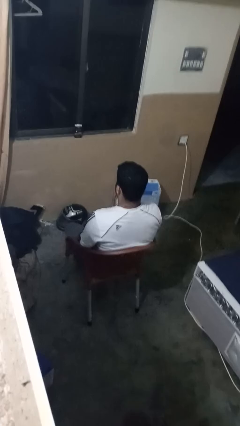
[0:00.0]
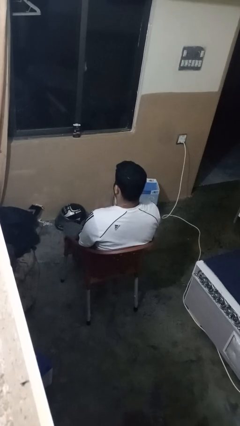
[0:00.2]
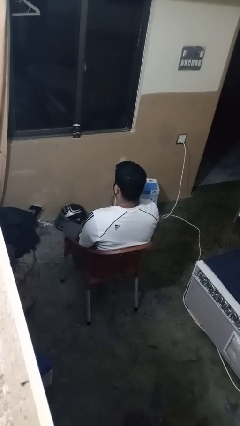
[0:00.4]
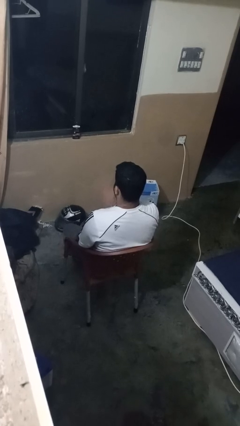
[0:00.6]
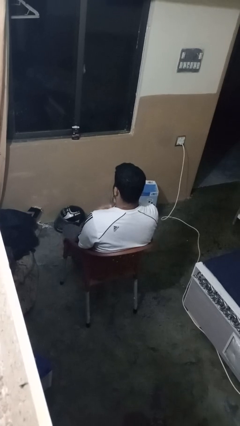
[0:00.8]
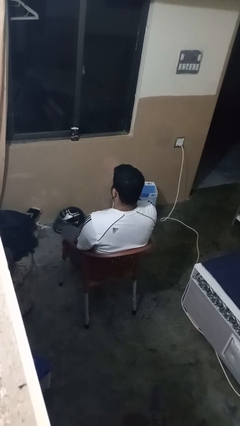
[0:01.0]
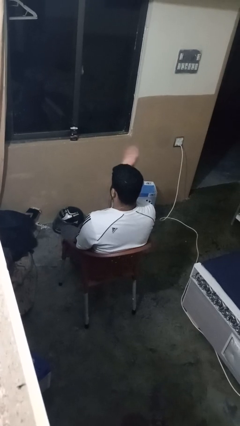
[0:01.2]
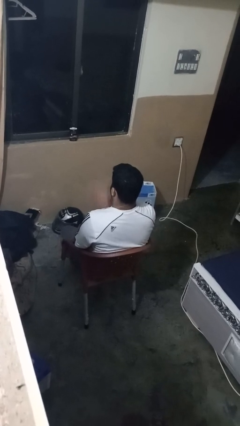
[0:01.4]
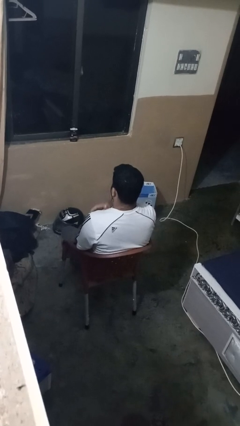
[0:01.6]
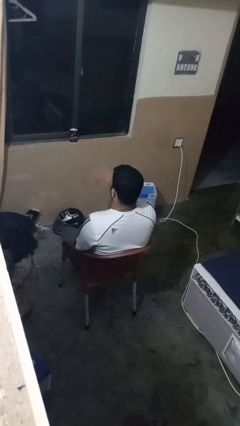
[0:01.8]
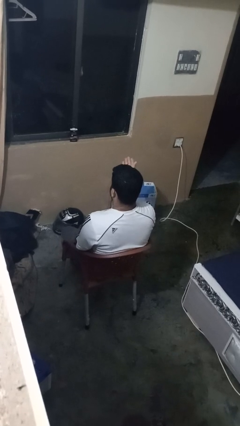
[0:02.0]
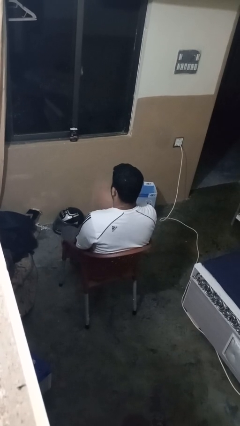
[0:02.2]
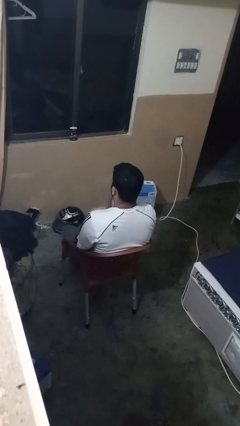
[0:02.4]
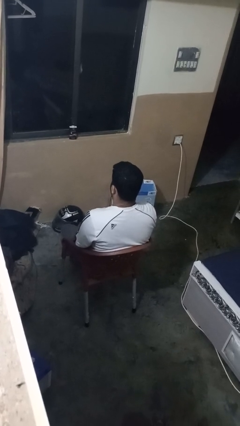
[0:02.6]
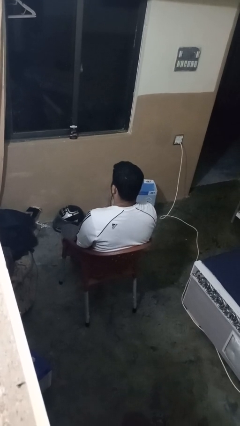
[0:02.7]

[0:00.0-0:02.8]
person drums on chest

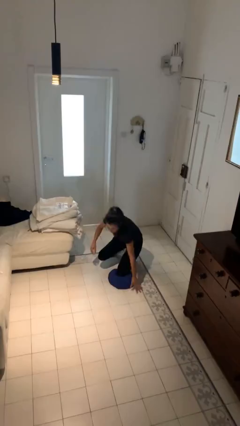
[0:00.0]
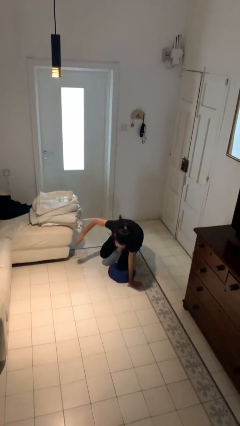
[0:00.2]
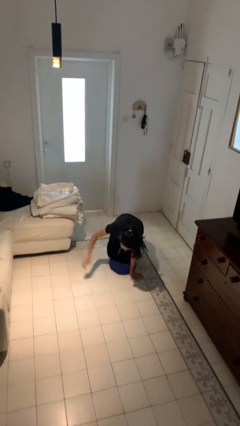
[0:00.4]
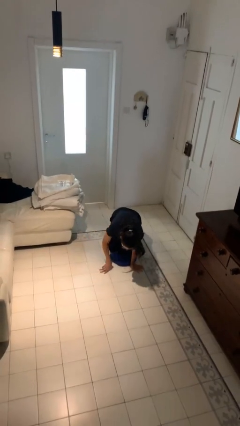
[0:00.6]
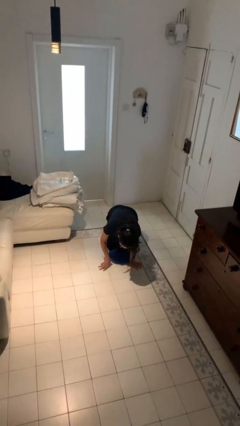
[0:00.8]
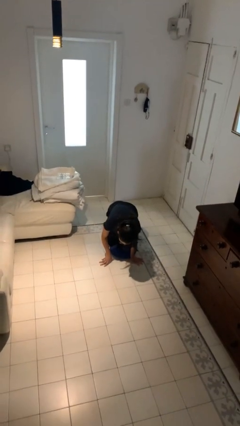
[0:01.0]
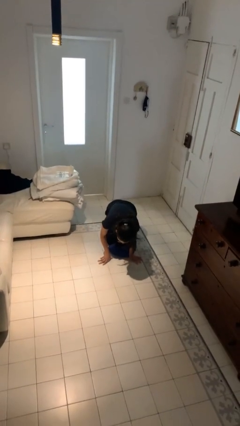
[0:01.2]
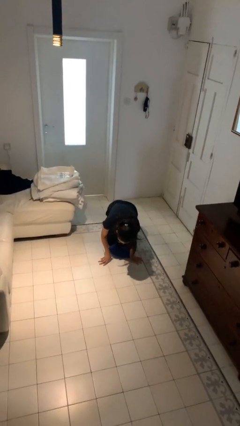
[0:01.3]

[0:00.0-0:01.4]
person trips on object on floor

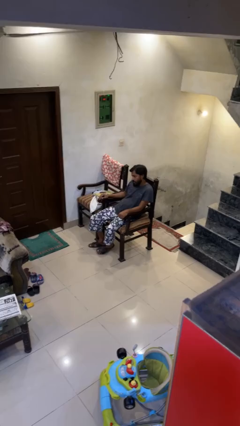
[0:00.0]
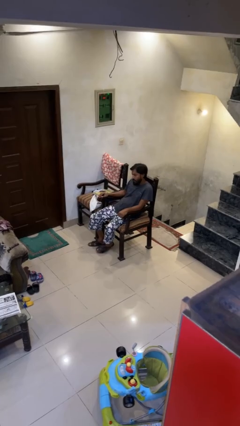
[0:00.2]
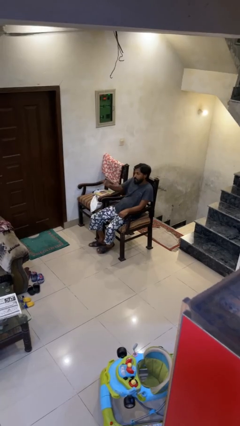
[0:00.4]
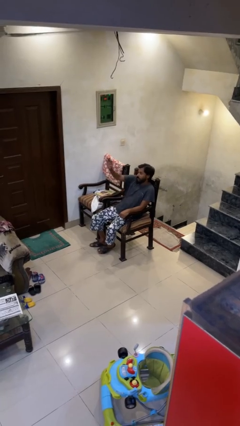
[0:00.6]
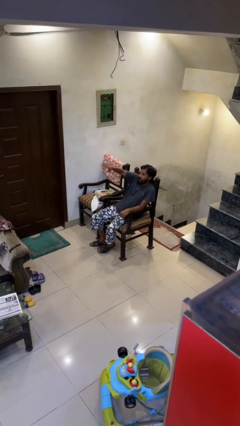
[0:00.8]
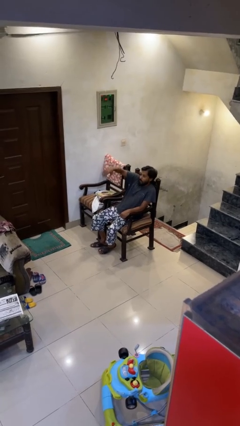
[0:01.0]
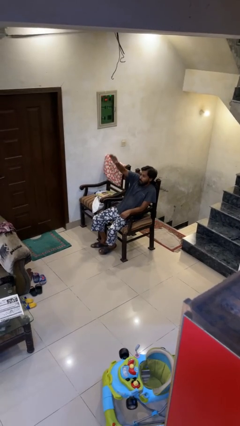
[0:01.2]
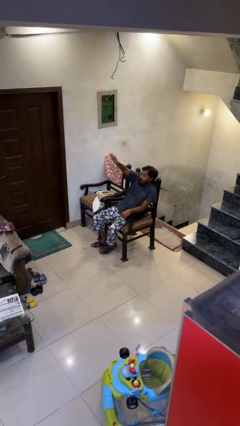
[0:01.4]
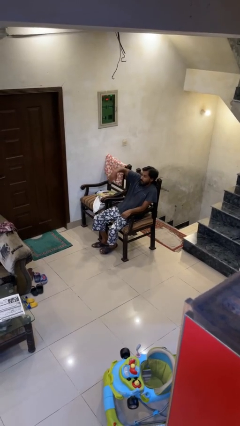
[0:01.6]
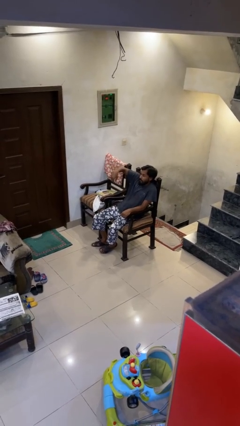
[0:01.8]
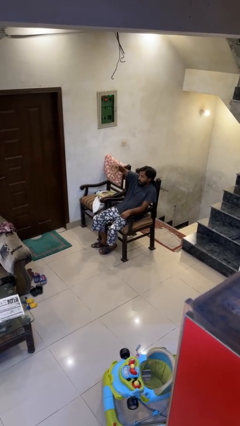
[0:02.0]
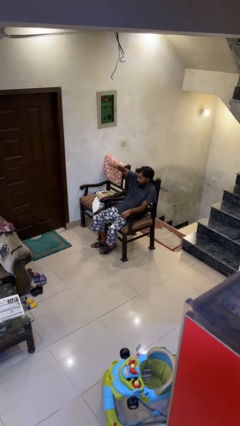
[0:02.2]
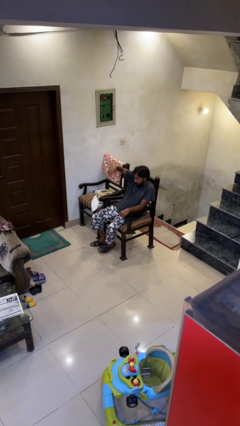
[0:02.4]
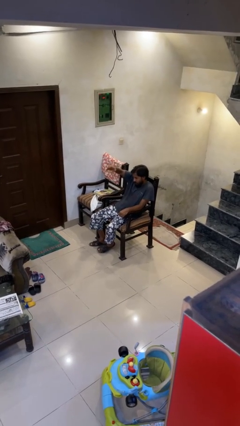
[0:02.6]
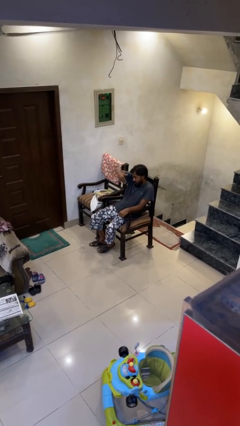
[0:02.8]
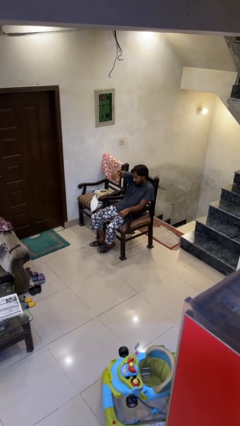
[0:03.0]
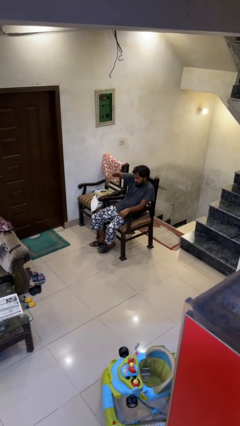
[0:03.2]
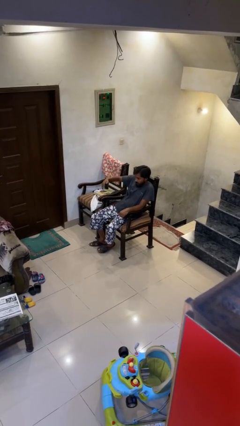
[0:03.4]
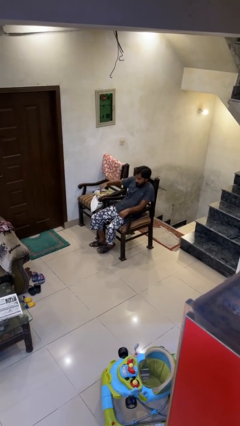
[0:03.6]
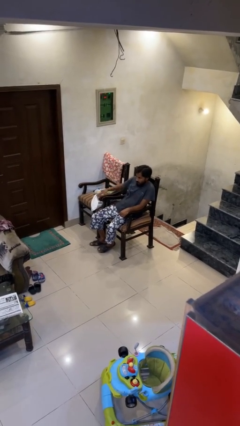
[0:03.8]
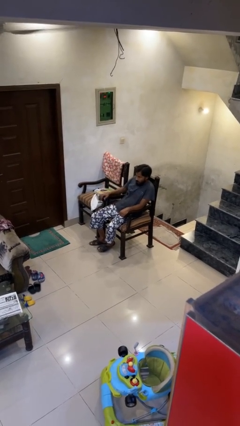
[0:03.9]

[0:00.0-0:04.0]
person gestures come here

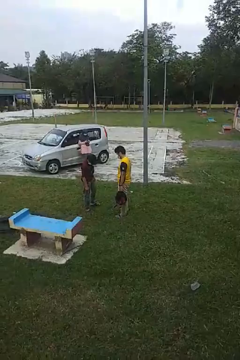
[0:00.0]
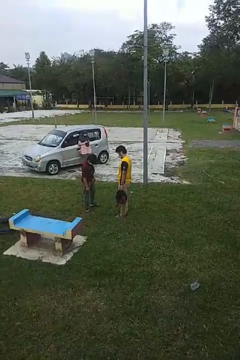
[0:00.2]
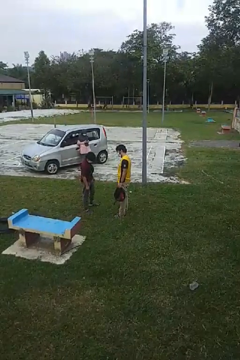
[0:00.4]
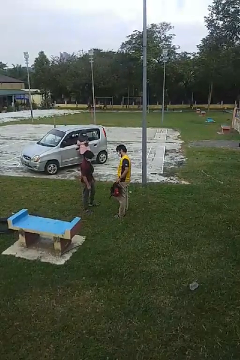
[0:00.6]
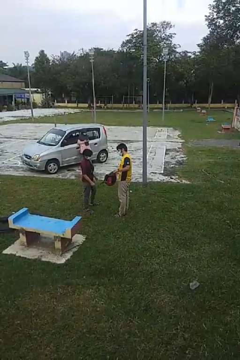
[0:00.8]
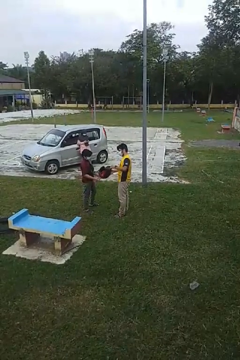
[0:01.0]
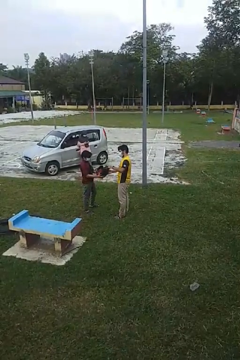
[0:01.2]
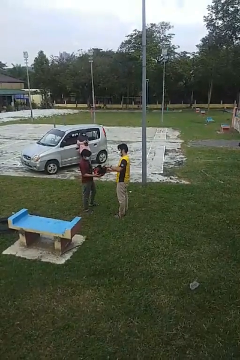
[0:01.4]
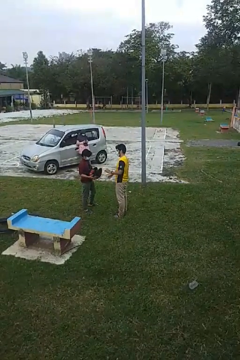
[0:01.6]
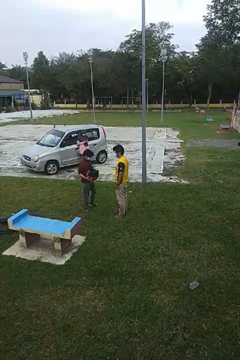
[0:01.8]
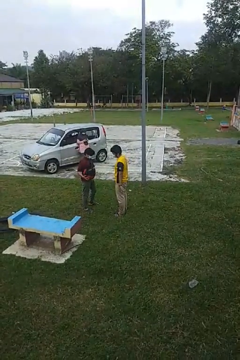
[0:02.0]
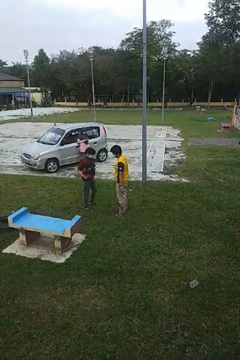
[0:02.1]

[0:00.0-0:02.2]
person transfers object to person

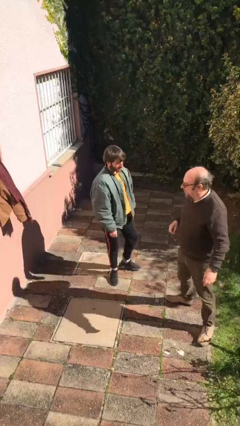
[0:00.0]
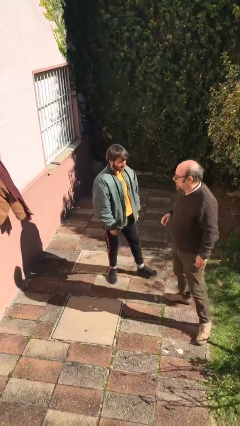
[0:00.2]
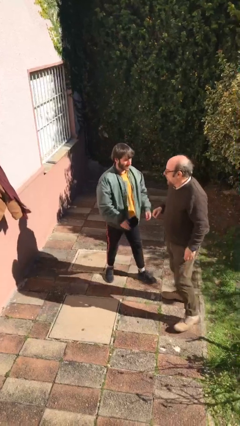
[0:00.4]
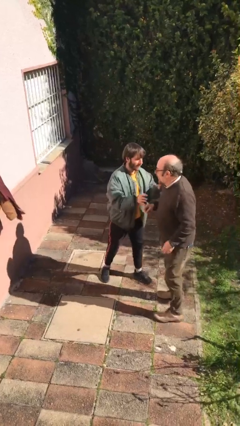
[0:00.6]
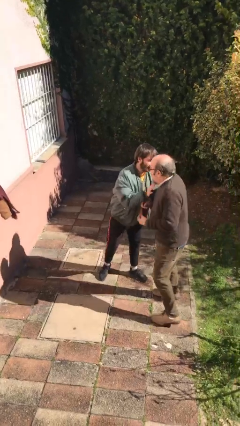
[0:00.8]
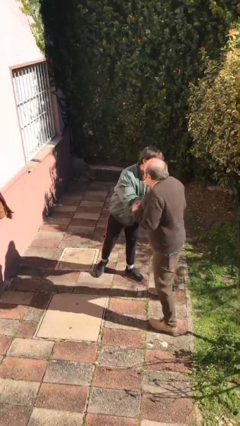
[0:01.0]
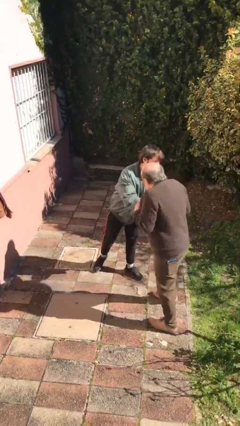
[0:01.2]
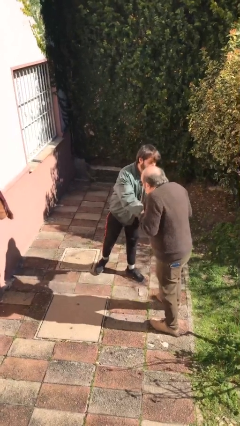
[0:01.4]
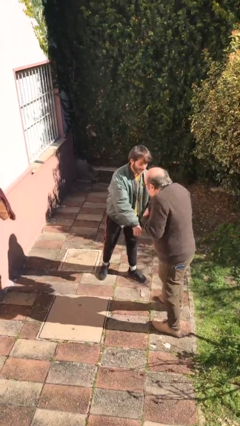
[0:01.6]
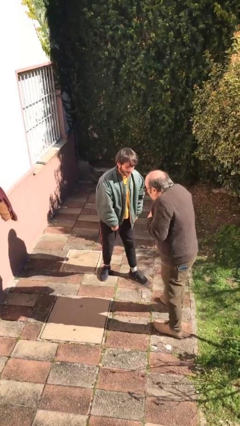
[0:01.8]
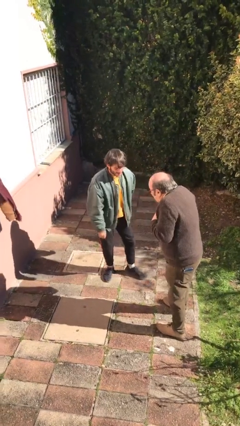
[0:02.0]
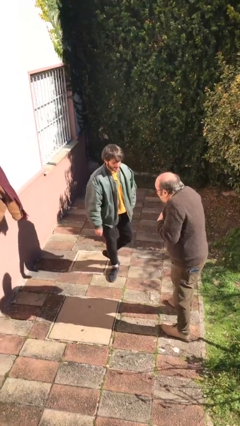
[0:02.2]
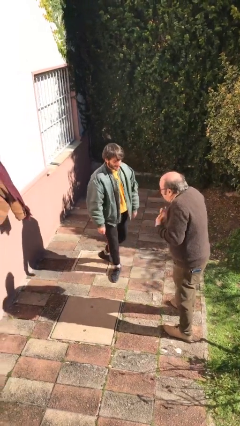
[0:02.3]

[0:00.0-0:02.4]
person shoves person

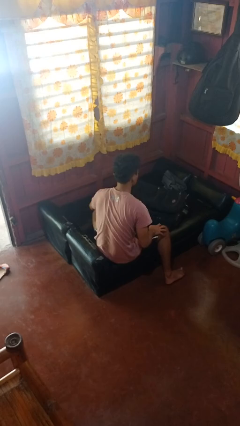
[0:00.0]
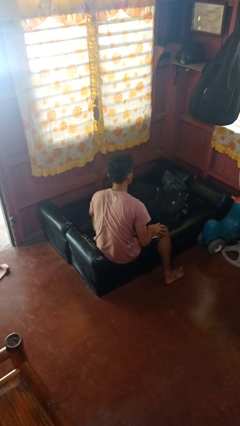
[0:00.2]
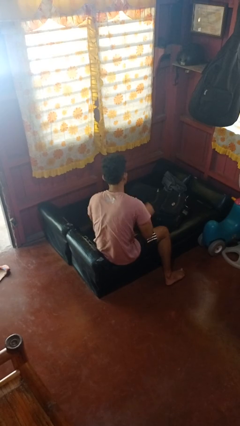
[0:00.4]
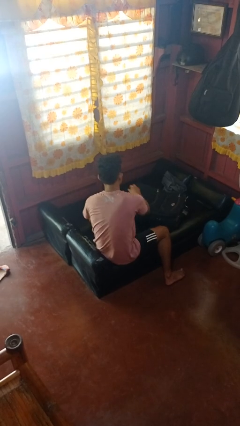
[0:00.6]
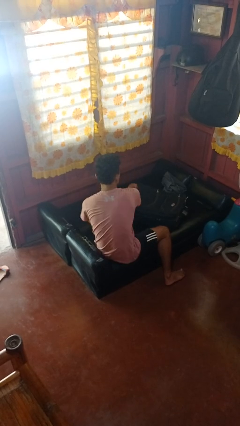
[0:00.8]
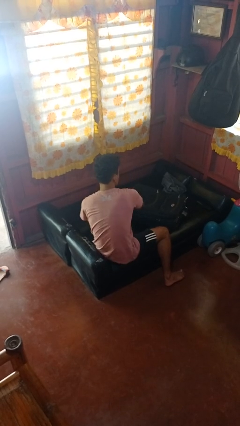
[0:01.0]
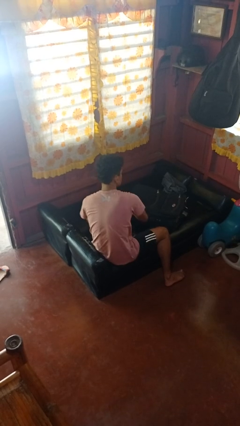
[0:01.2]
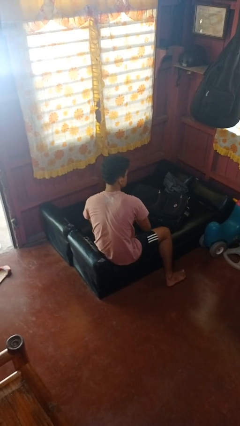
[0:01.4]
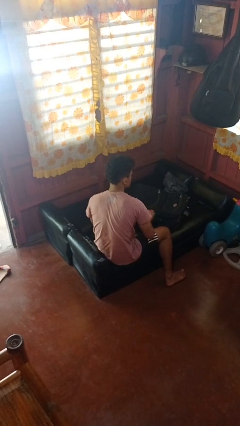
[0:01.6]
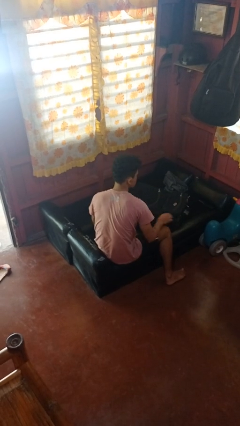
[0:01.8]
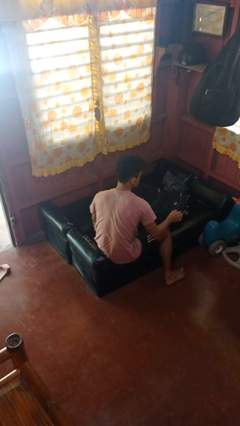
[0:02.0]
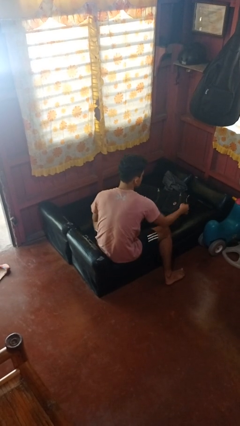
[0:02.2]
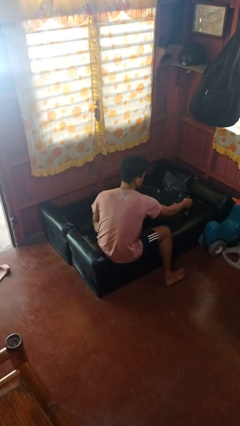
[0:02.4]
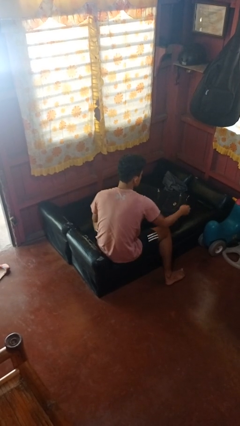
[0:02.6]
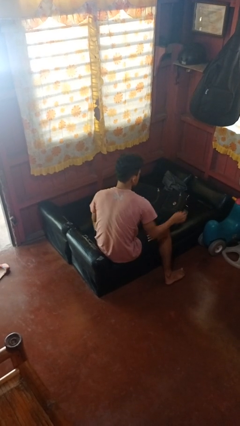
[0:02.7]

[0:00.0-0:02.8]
person closes suitcase

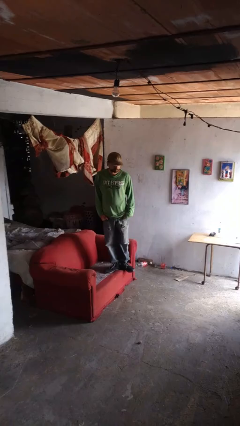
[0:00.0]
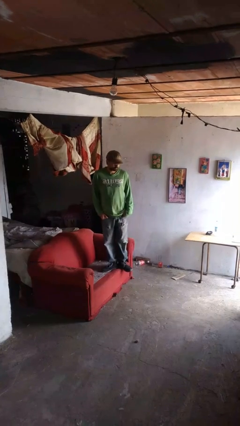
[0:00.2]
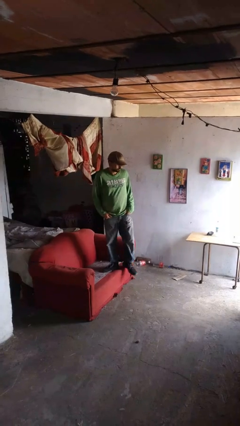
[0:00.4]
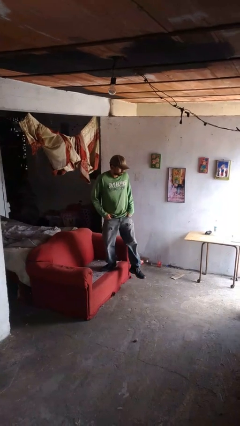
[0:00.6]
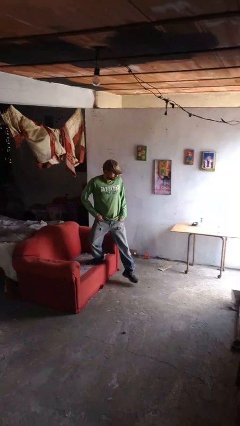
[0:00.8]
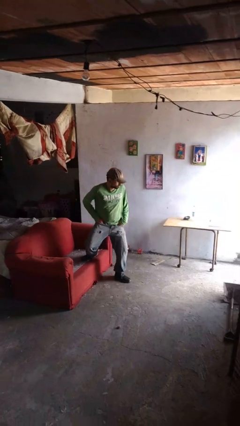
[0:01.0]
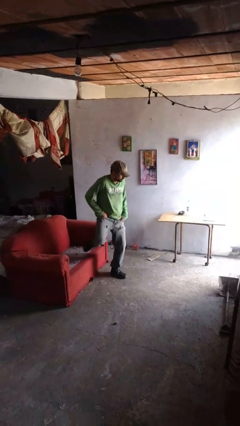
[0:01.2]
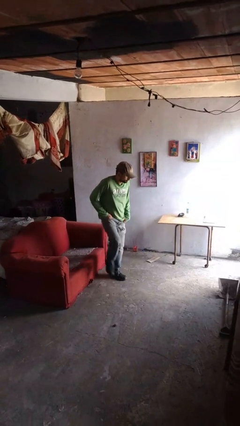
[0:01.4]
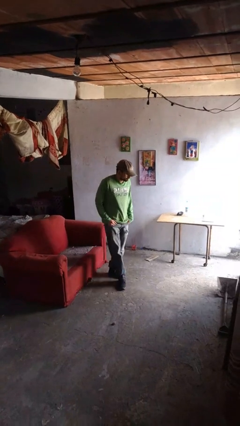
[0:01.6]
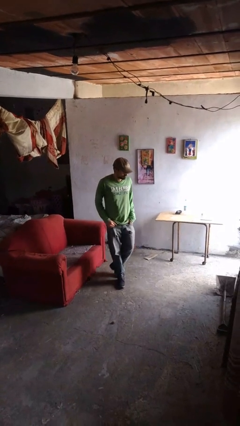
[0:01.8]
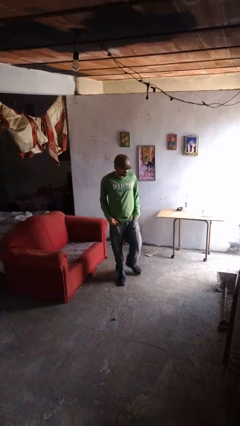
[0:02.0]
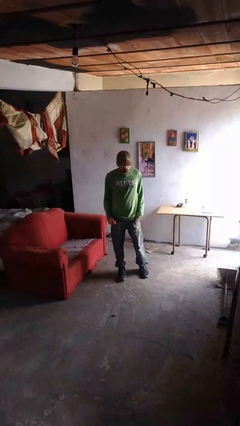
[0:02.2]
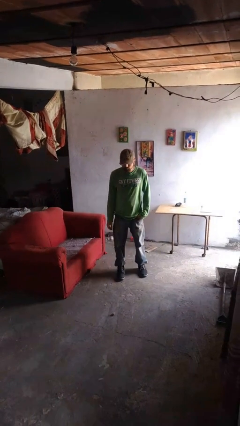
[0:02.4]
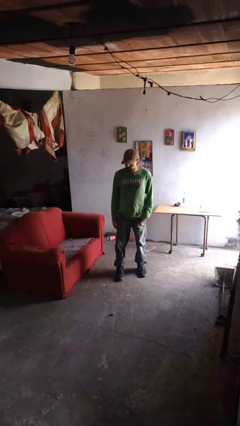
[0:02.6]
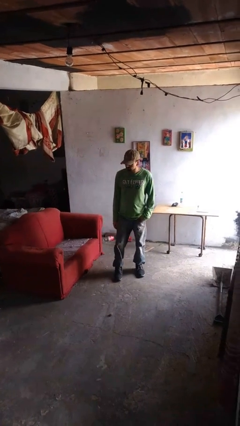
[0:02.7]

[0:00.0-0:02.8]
person climbs off couch
